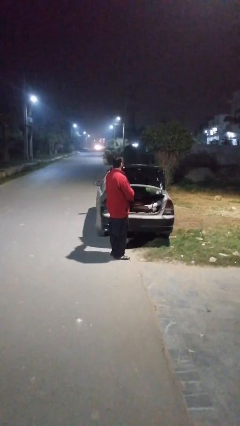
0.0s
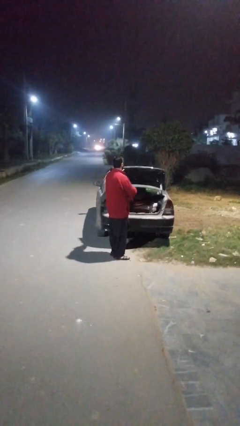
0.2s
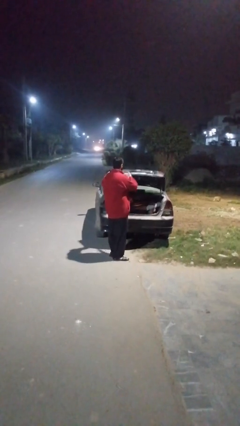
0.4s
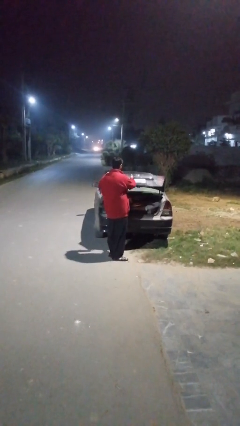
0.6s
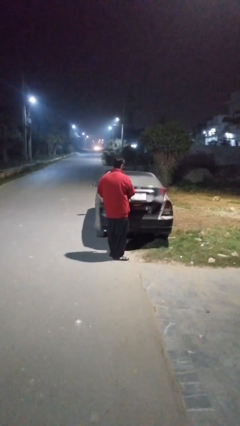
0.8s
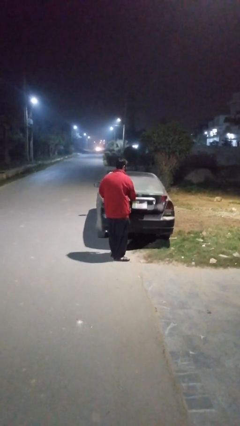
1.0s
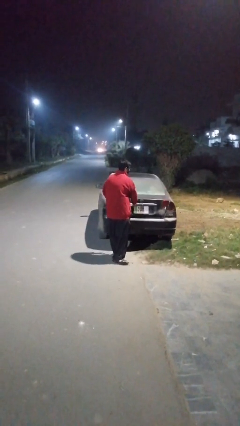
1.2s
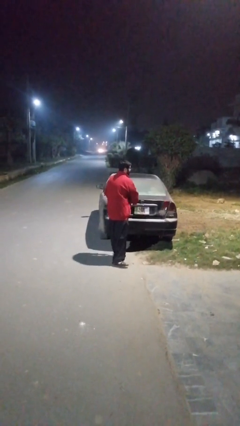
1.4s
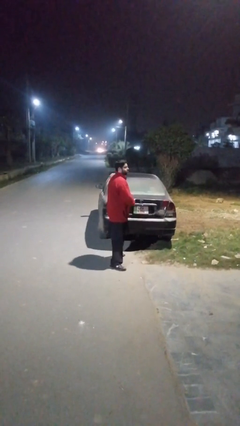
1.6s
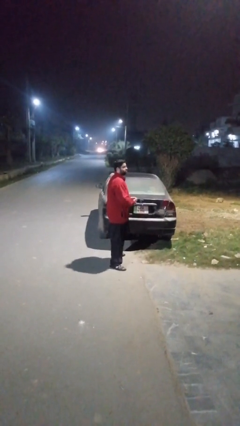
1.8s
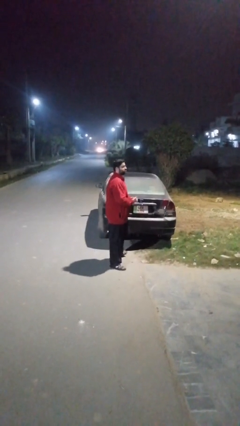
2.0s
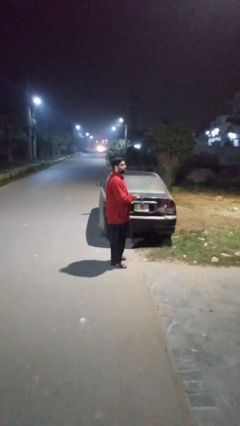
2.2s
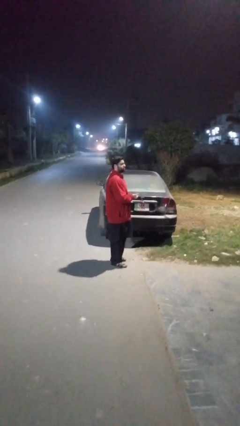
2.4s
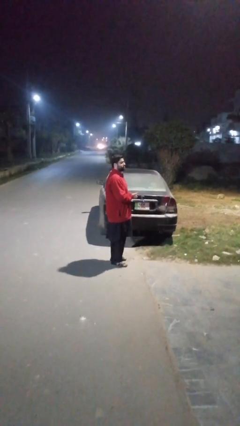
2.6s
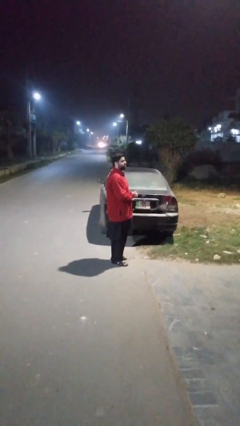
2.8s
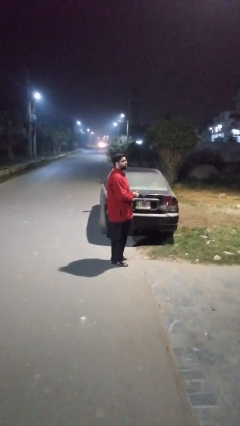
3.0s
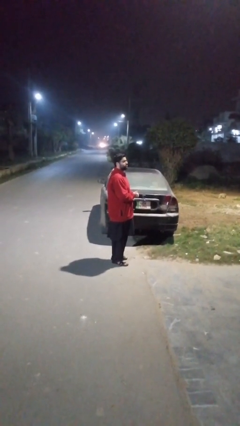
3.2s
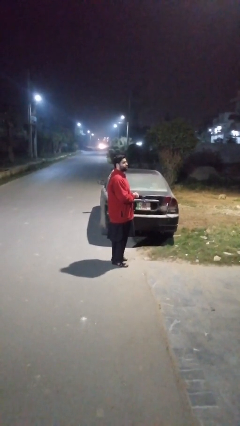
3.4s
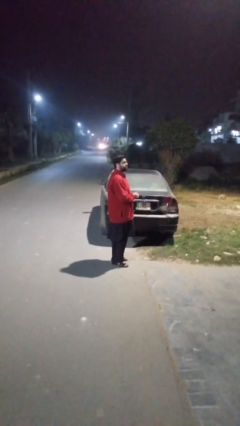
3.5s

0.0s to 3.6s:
person closes car trunk

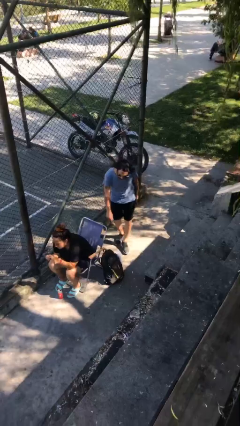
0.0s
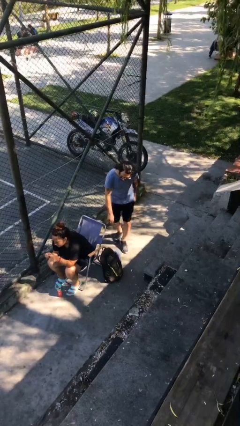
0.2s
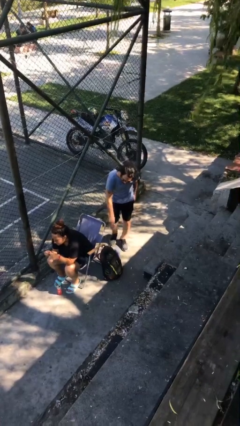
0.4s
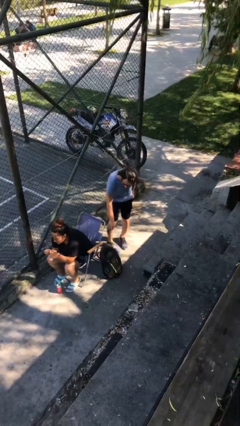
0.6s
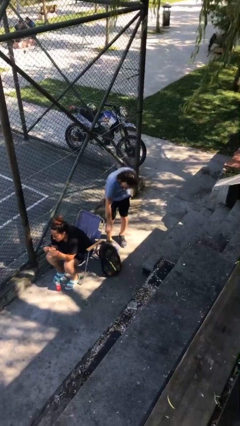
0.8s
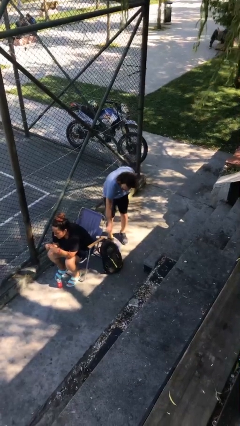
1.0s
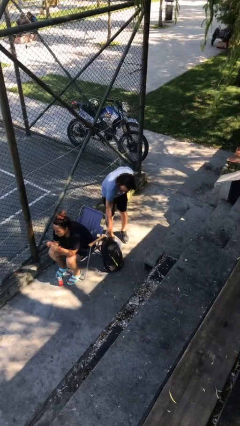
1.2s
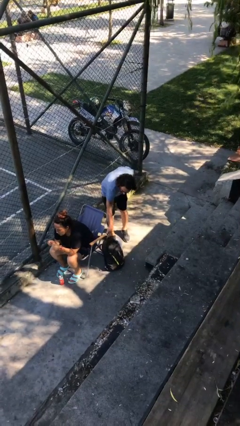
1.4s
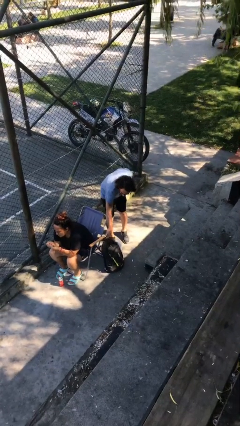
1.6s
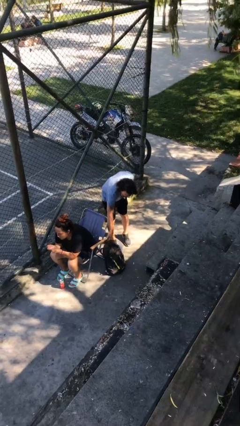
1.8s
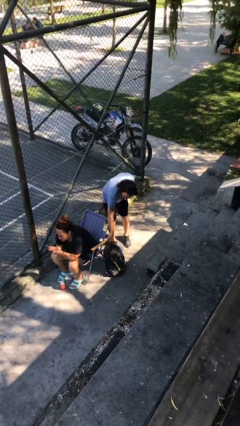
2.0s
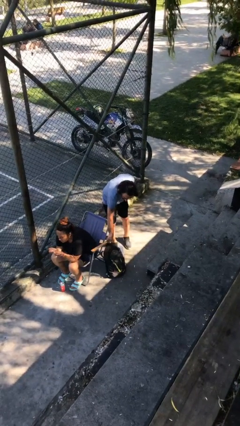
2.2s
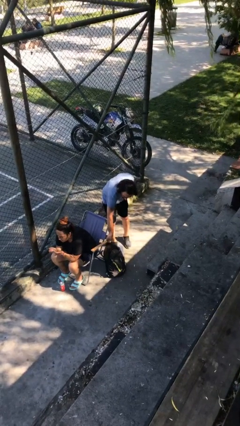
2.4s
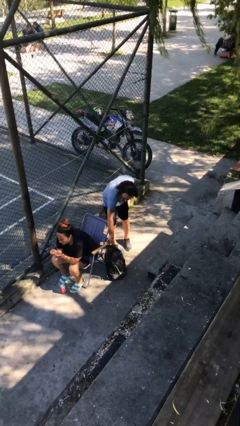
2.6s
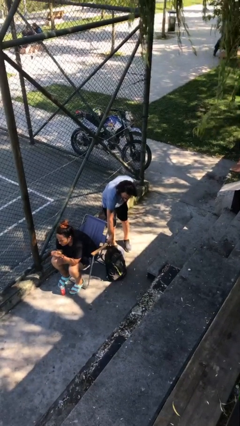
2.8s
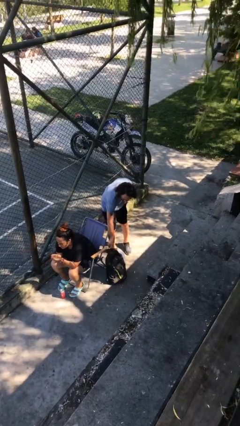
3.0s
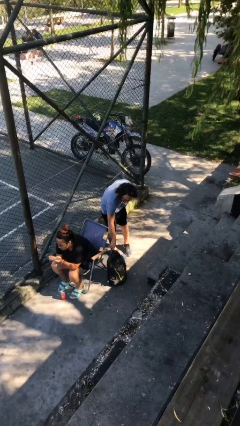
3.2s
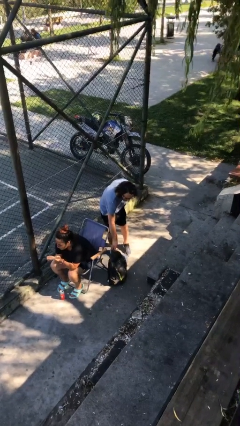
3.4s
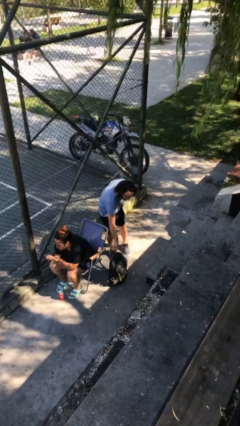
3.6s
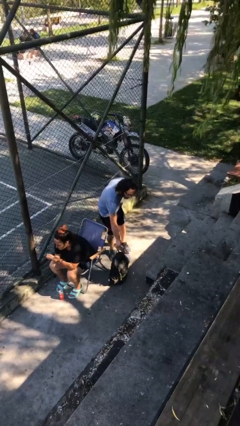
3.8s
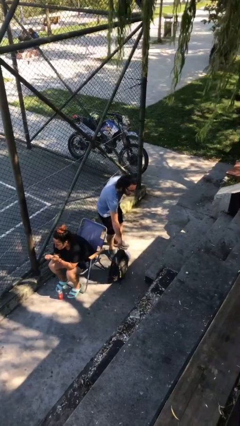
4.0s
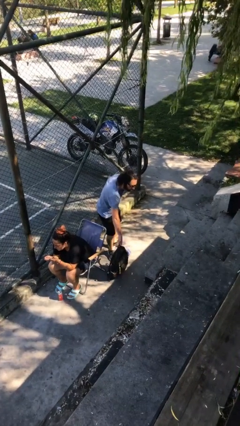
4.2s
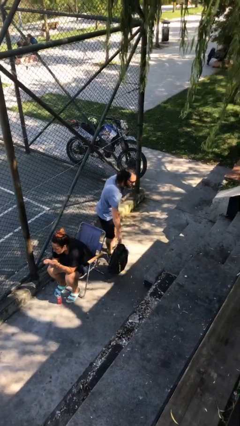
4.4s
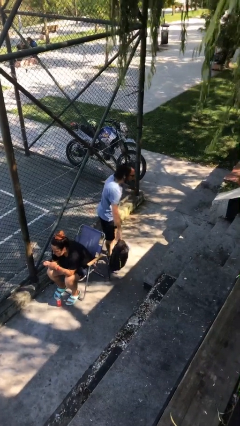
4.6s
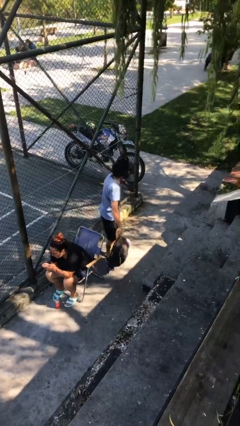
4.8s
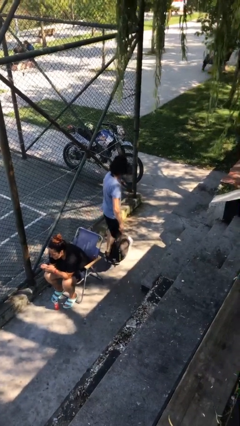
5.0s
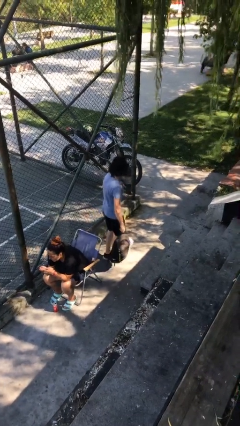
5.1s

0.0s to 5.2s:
person steals object from person

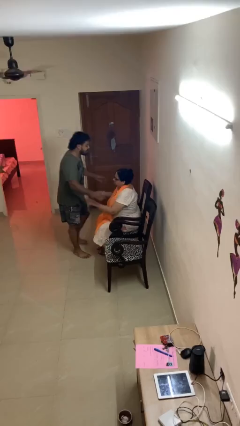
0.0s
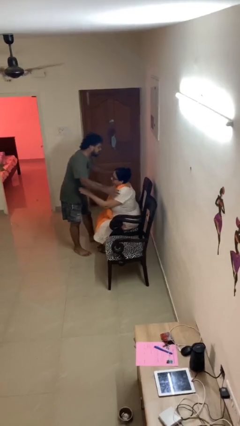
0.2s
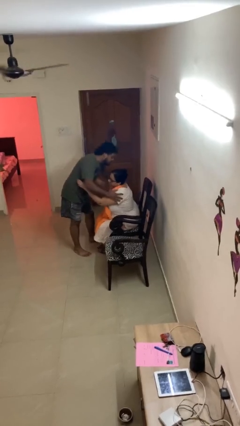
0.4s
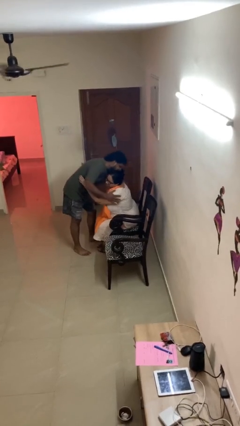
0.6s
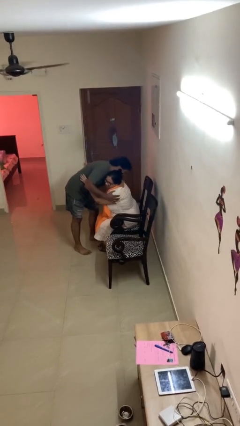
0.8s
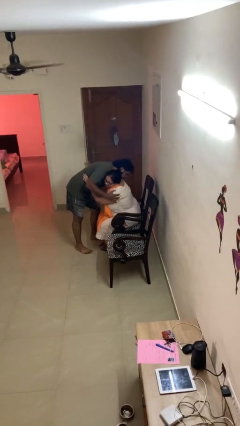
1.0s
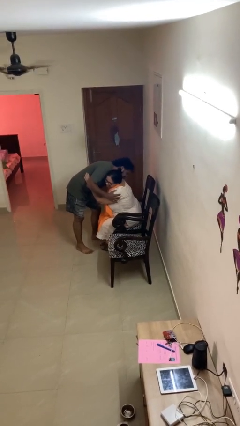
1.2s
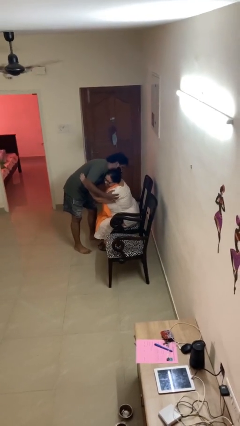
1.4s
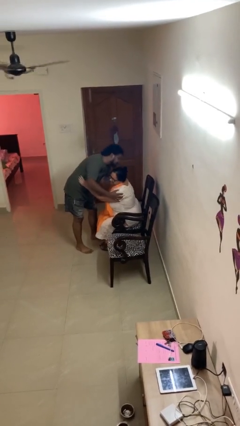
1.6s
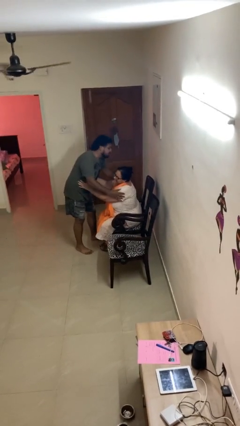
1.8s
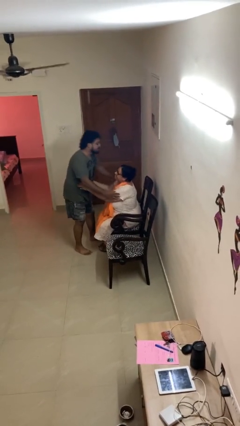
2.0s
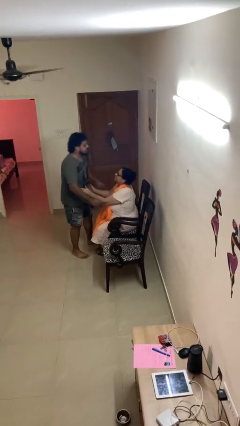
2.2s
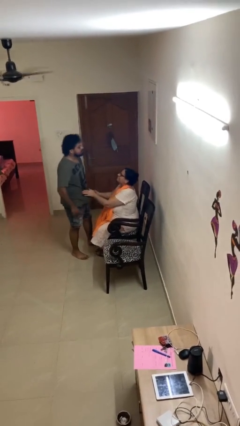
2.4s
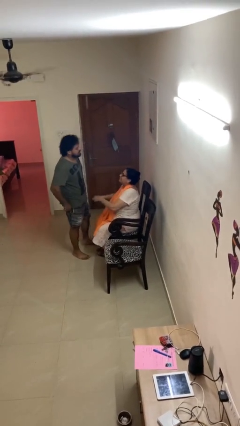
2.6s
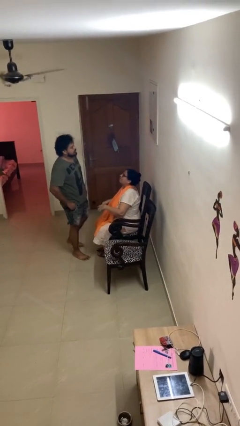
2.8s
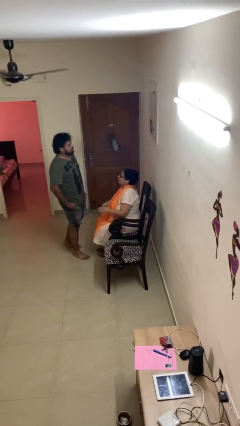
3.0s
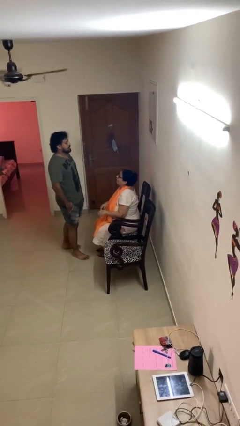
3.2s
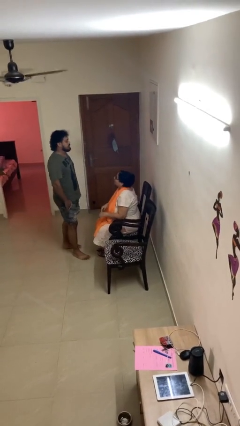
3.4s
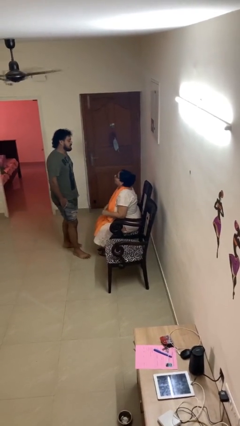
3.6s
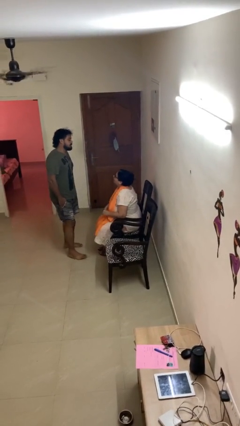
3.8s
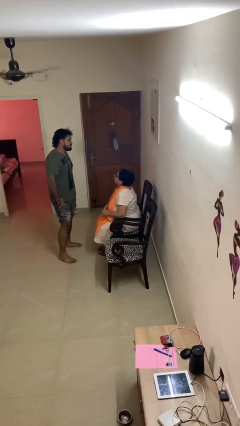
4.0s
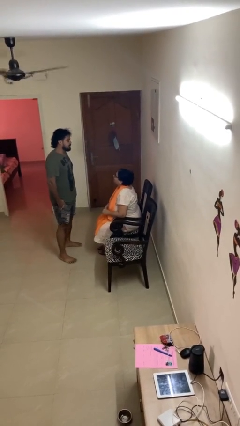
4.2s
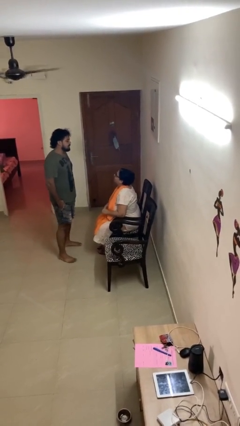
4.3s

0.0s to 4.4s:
person embraces person

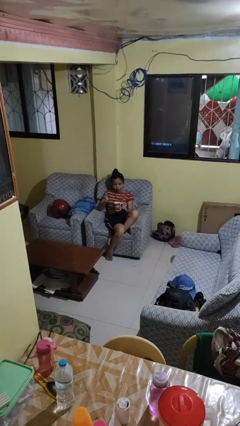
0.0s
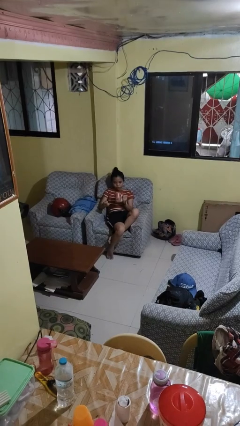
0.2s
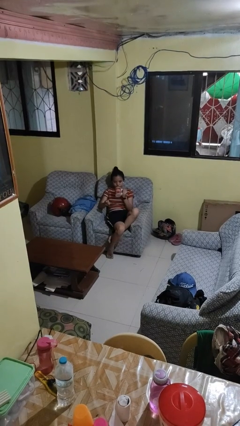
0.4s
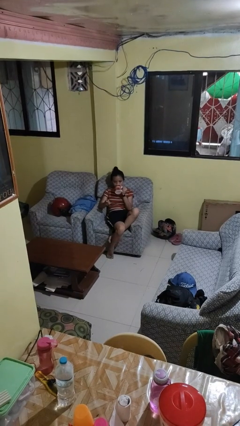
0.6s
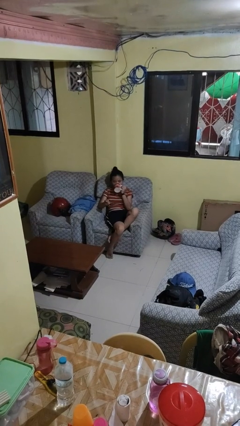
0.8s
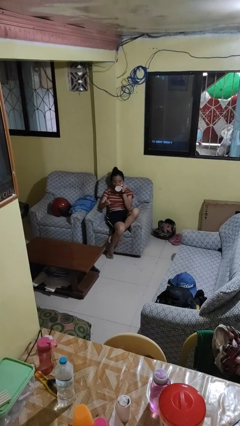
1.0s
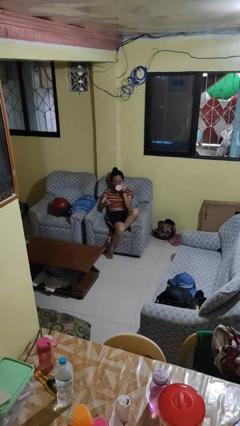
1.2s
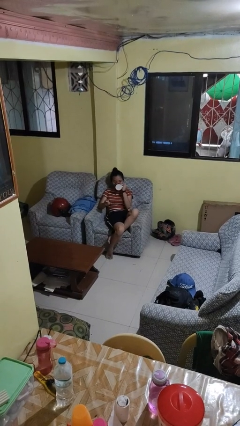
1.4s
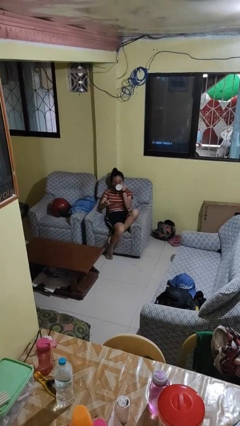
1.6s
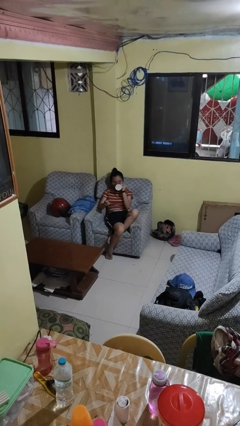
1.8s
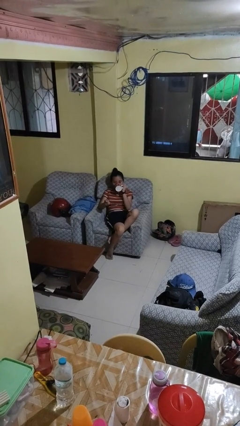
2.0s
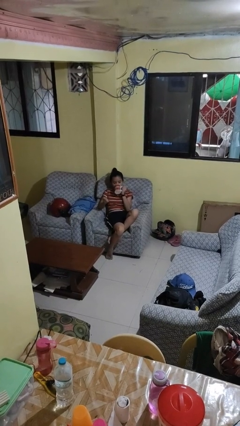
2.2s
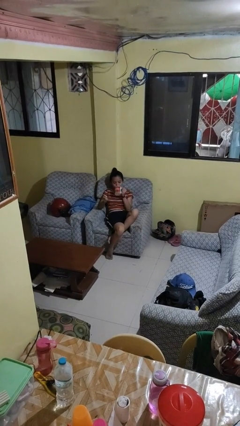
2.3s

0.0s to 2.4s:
person drinks from mug

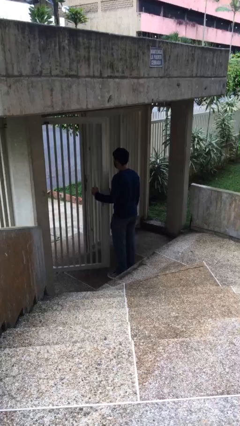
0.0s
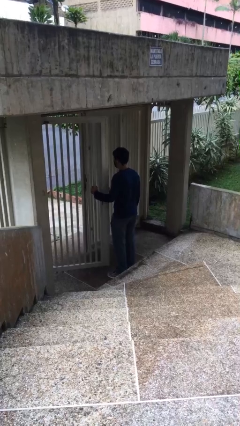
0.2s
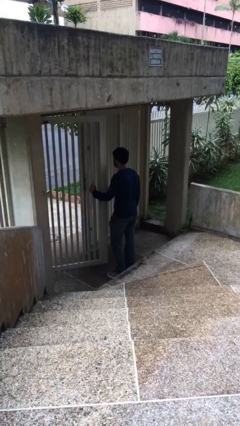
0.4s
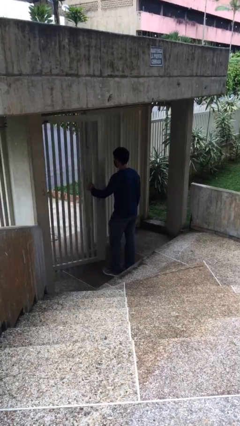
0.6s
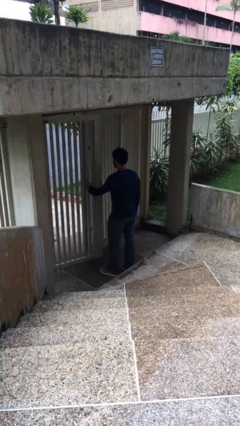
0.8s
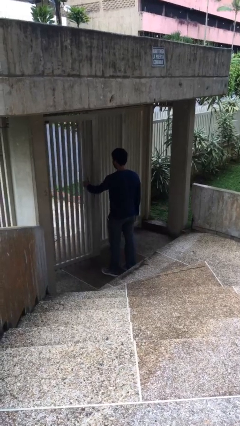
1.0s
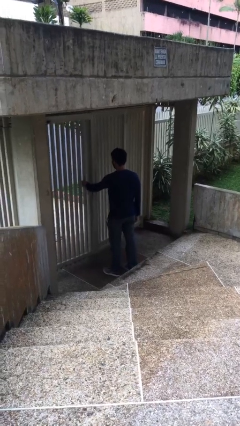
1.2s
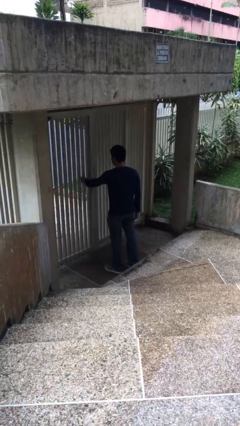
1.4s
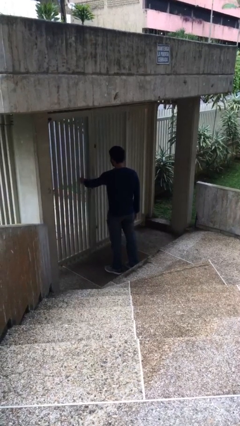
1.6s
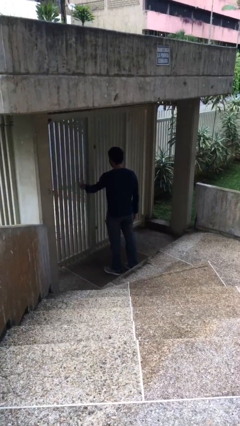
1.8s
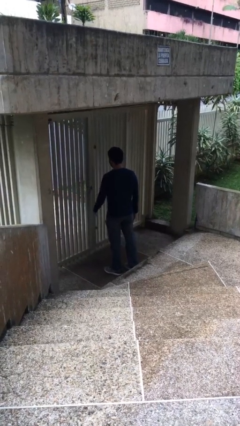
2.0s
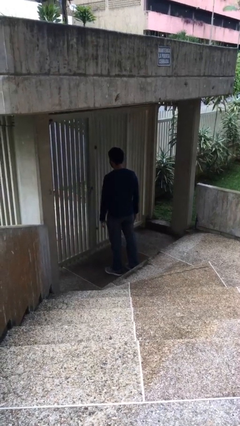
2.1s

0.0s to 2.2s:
person closes facility door

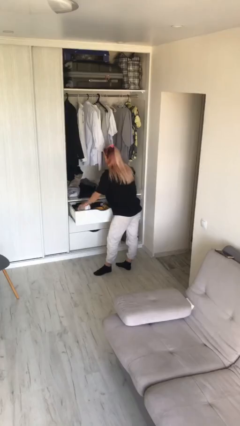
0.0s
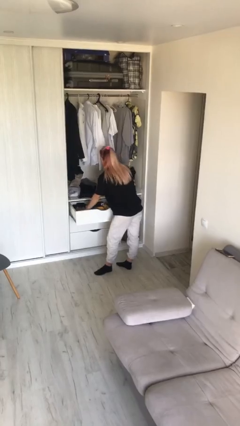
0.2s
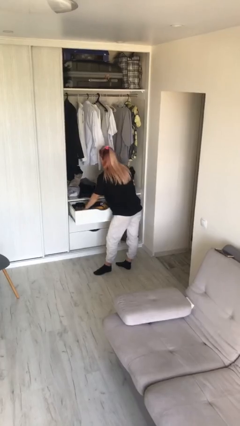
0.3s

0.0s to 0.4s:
person puts clothes into dresser
